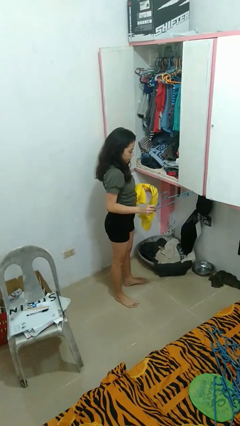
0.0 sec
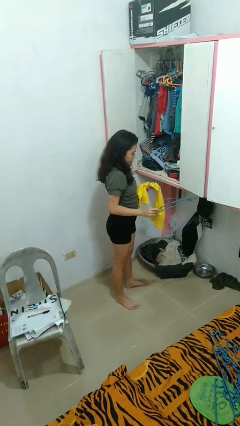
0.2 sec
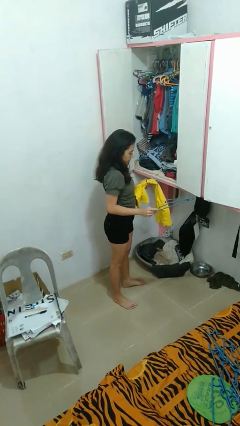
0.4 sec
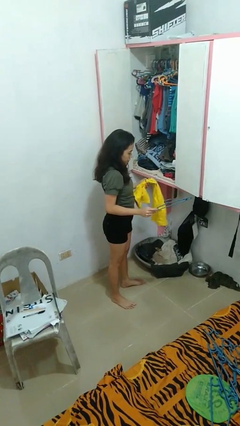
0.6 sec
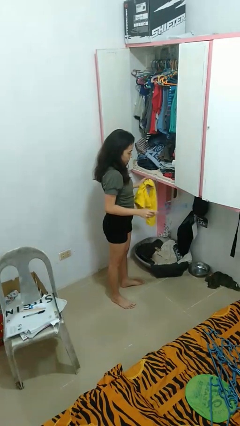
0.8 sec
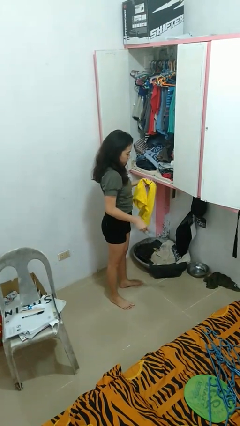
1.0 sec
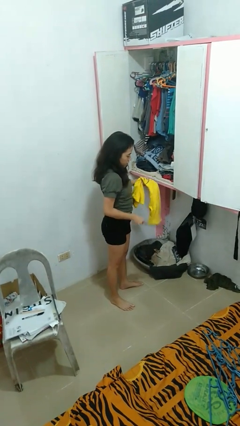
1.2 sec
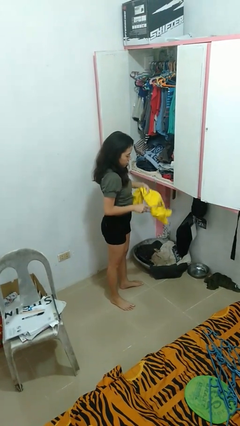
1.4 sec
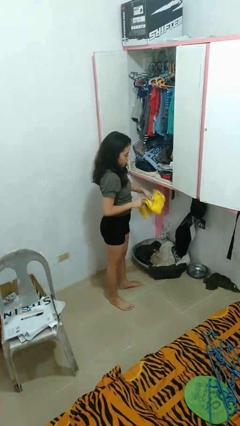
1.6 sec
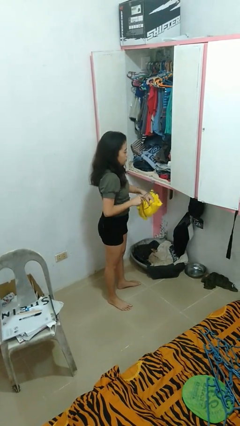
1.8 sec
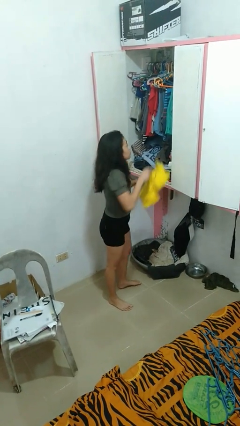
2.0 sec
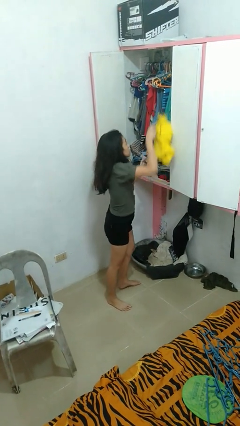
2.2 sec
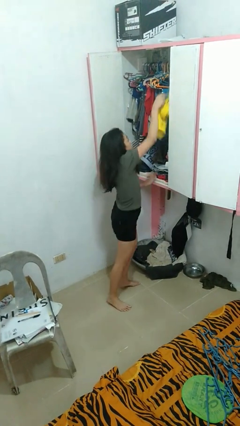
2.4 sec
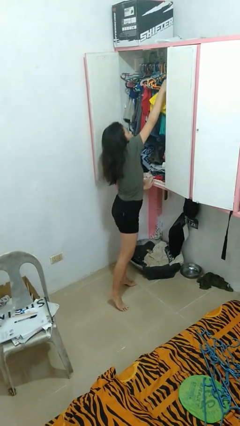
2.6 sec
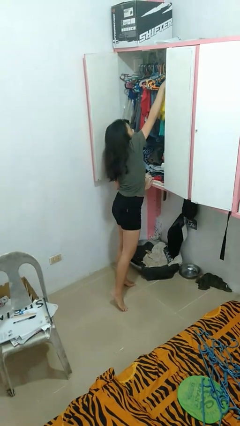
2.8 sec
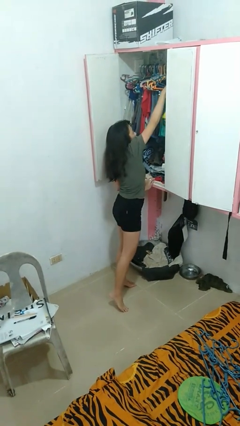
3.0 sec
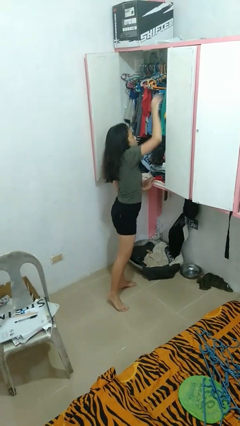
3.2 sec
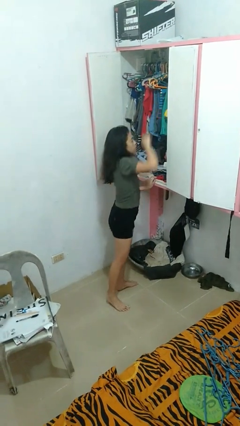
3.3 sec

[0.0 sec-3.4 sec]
person puts clothes into closet

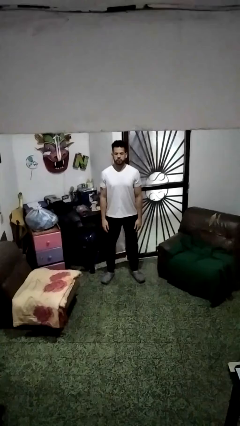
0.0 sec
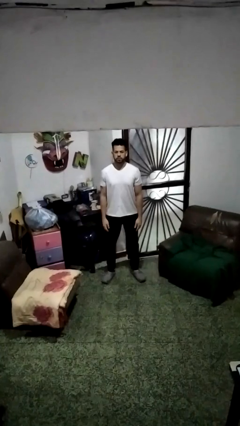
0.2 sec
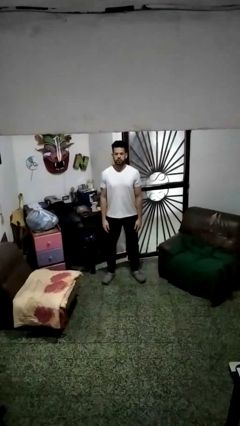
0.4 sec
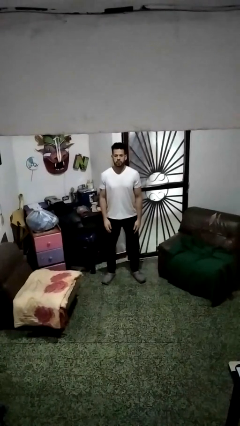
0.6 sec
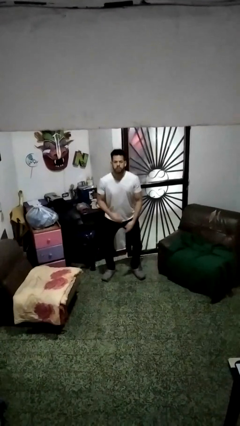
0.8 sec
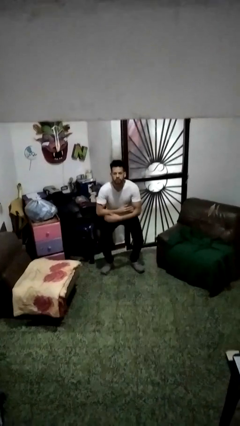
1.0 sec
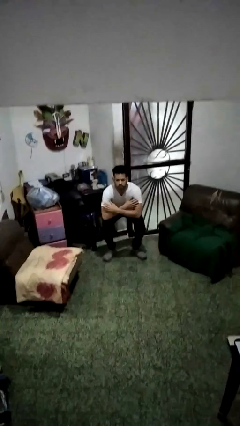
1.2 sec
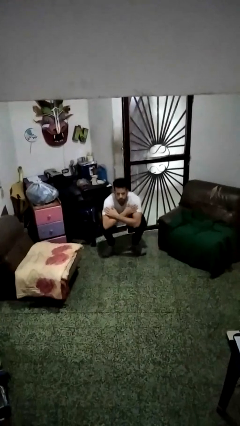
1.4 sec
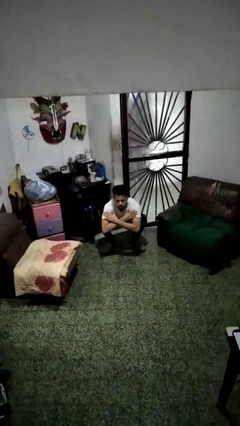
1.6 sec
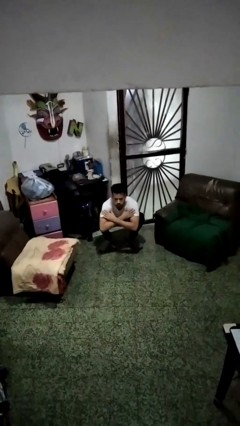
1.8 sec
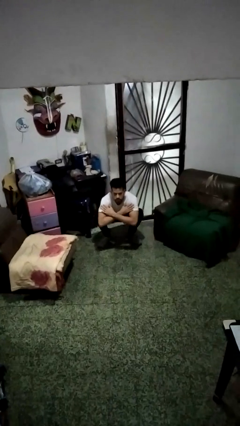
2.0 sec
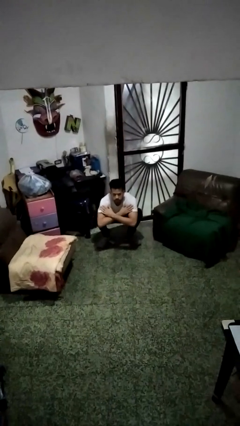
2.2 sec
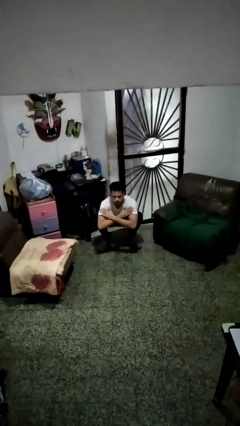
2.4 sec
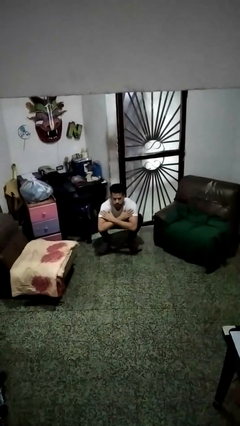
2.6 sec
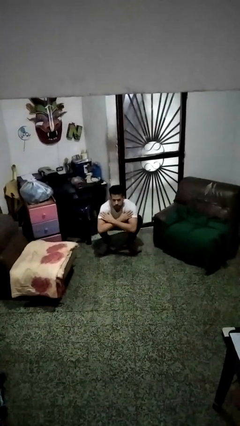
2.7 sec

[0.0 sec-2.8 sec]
person squats

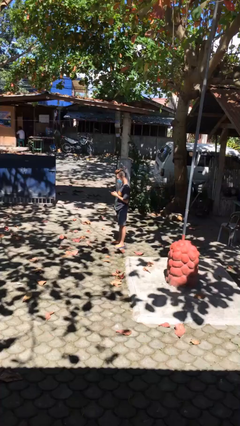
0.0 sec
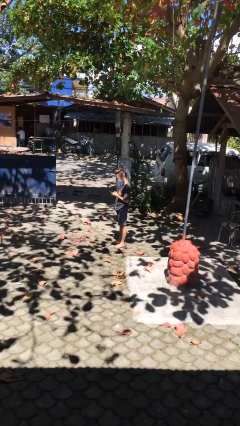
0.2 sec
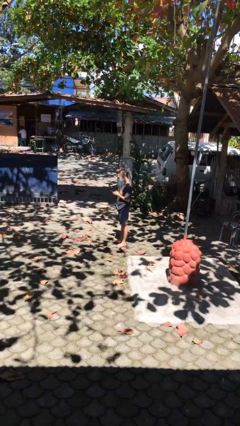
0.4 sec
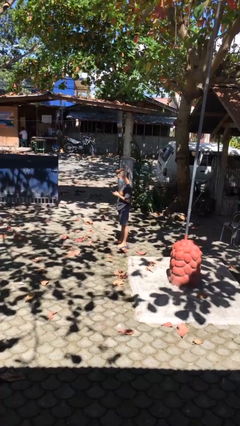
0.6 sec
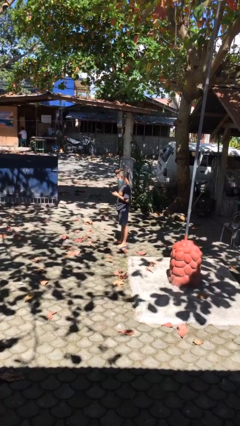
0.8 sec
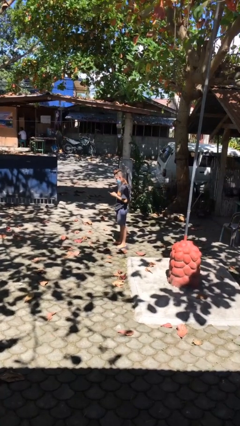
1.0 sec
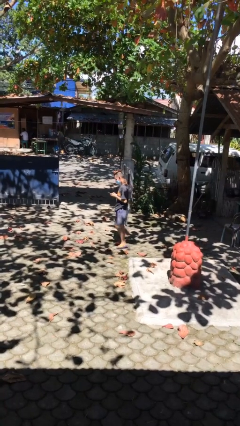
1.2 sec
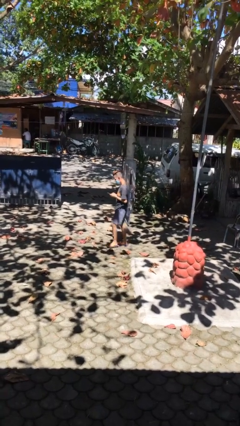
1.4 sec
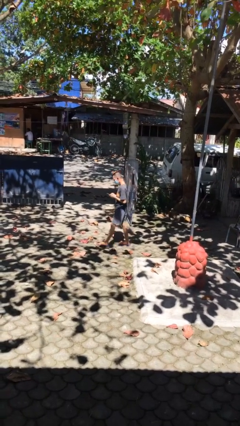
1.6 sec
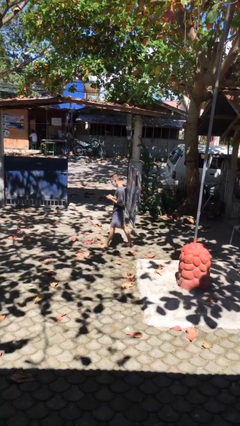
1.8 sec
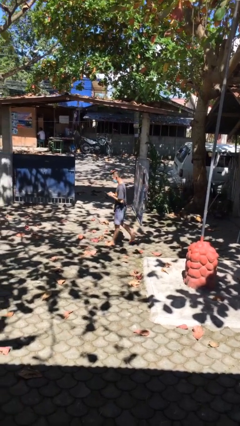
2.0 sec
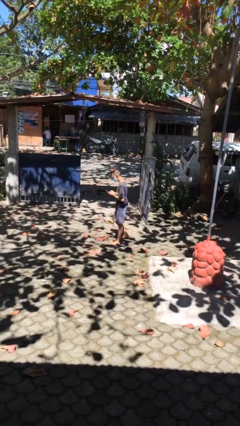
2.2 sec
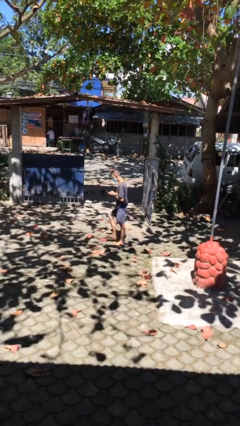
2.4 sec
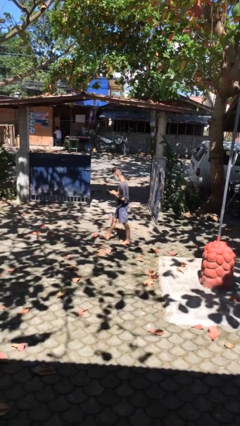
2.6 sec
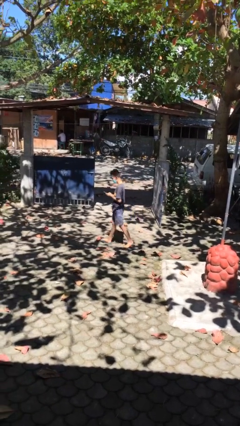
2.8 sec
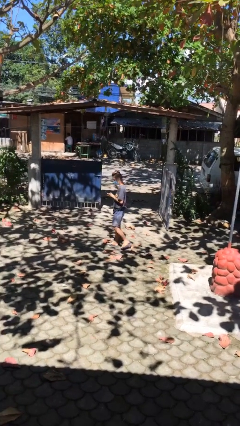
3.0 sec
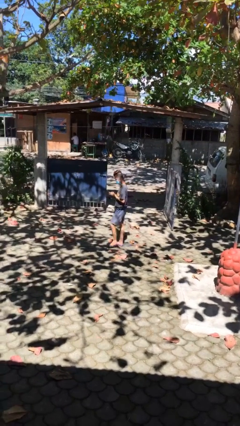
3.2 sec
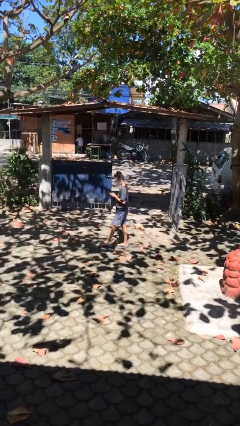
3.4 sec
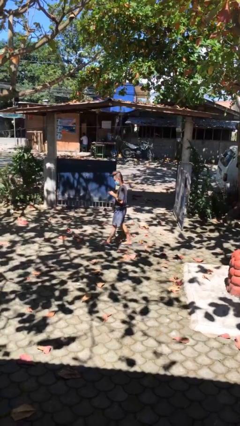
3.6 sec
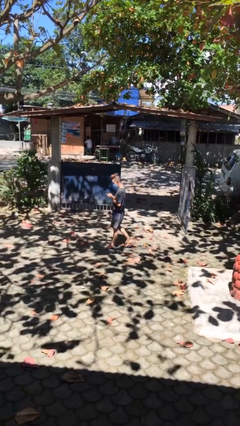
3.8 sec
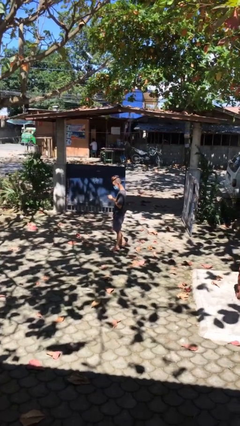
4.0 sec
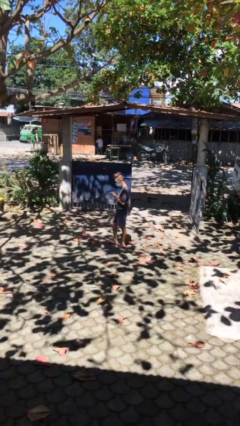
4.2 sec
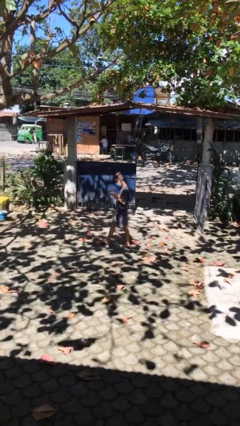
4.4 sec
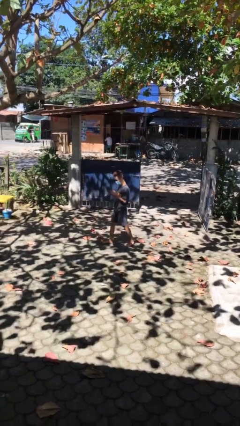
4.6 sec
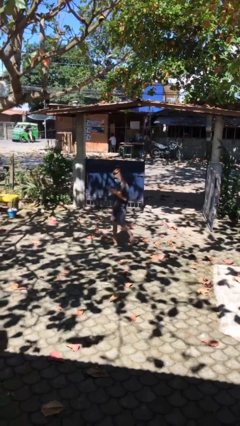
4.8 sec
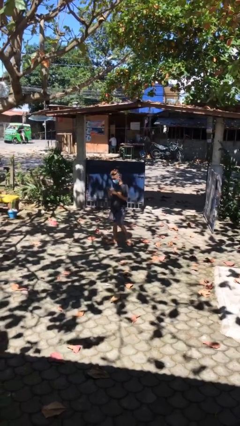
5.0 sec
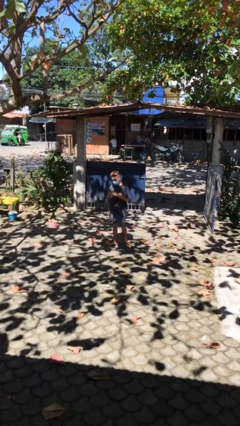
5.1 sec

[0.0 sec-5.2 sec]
person texts on phone

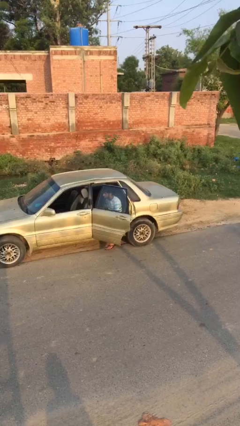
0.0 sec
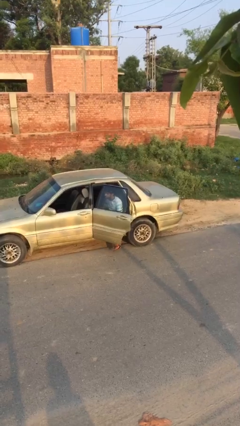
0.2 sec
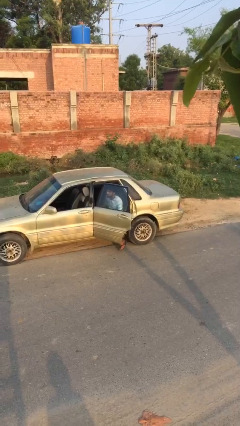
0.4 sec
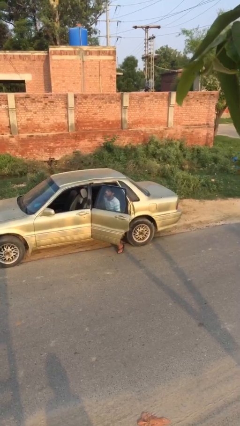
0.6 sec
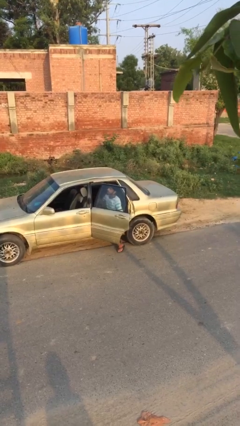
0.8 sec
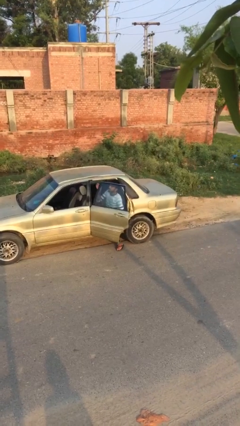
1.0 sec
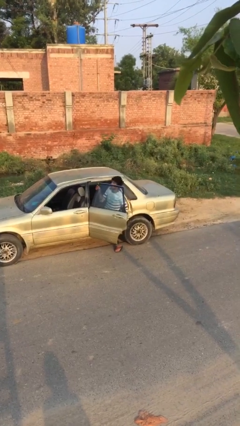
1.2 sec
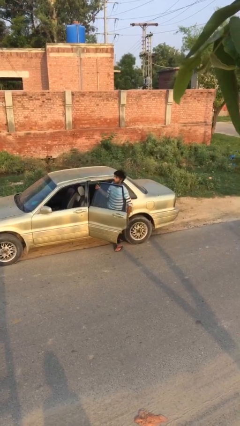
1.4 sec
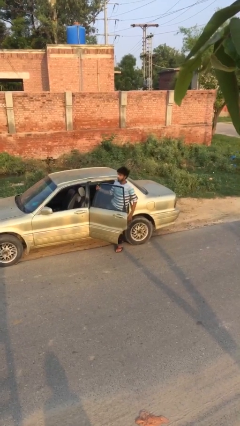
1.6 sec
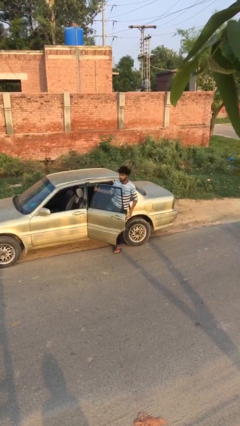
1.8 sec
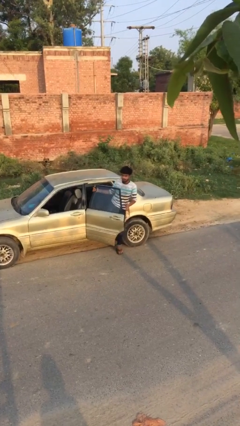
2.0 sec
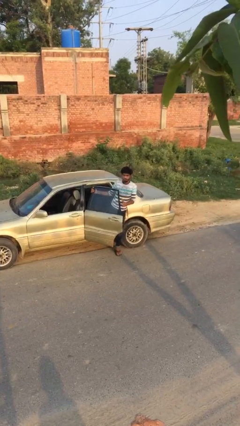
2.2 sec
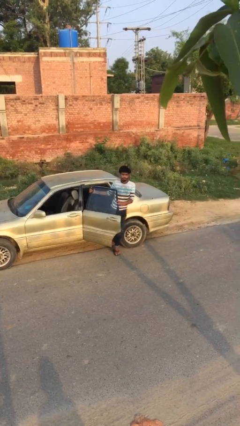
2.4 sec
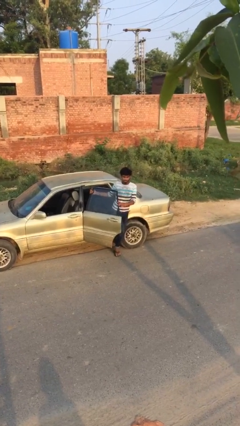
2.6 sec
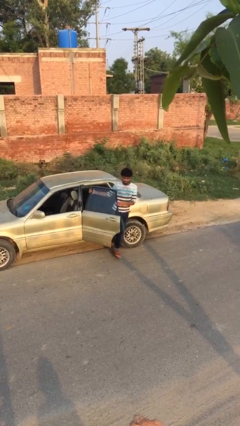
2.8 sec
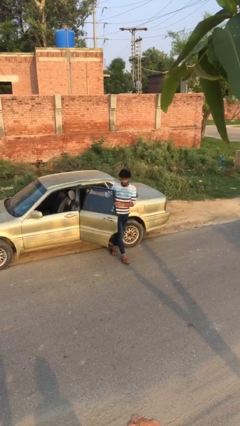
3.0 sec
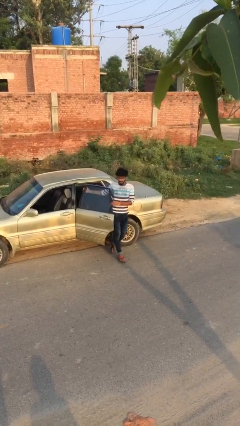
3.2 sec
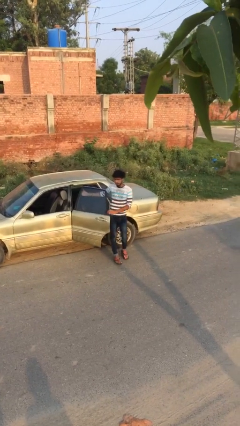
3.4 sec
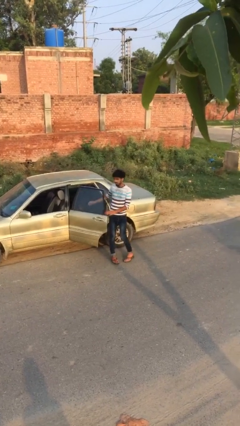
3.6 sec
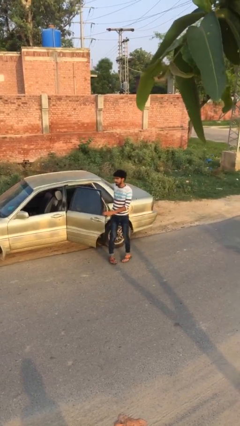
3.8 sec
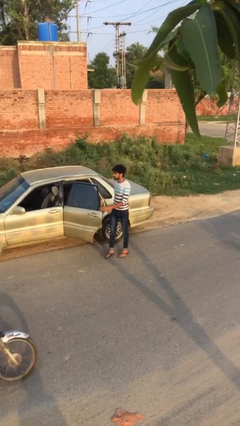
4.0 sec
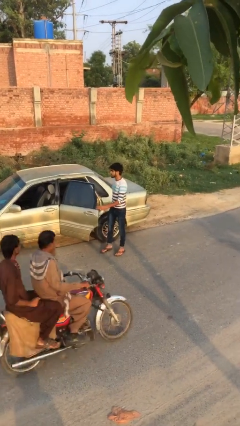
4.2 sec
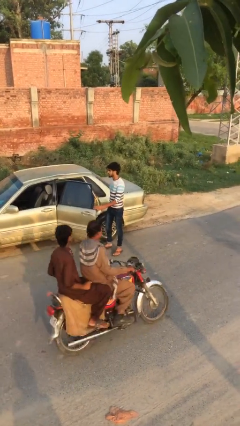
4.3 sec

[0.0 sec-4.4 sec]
person exits car

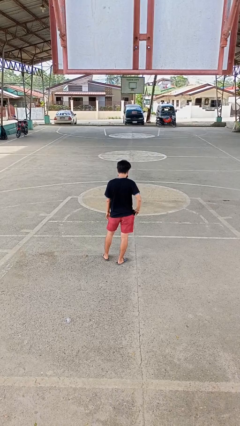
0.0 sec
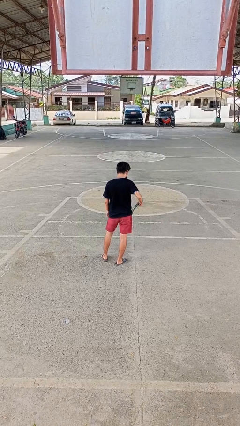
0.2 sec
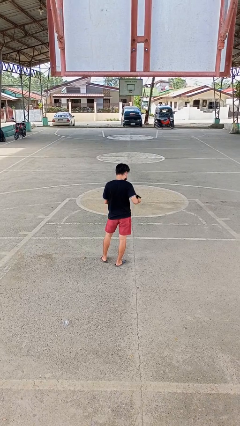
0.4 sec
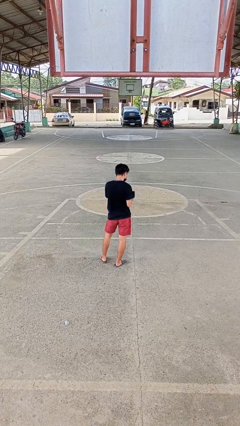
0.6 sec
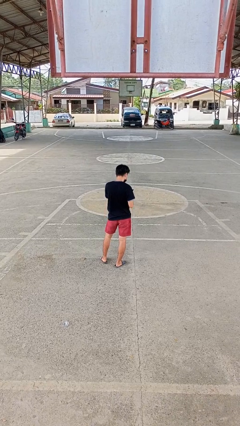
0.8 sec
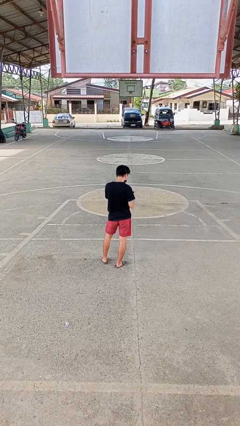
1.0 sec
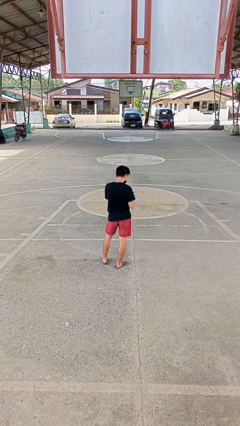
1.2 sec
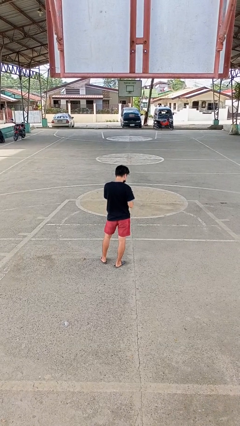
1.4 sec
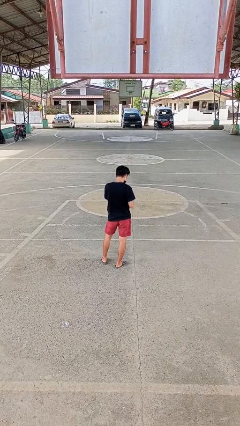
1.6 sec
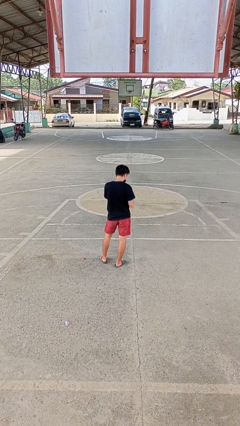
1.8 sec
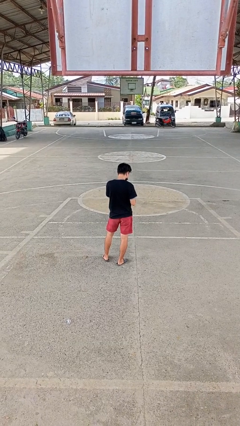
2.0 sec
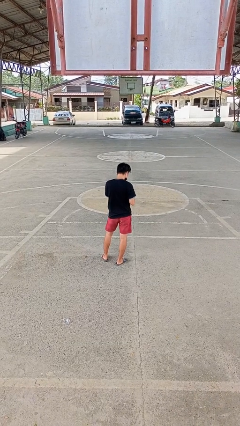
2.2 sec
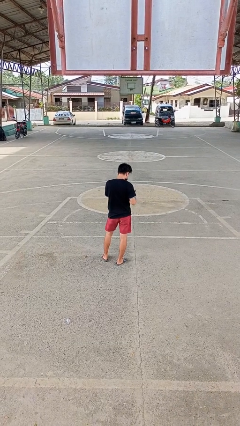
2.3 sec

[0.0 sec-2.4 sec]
person takes phone from pocket
